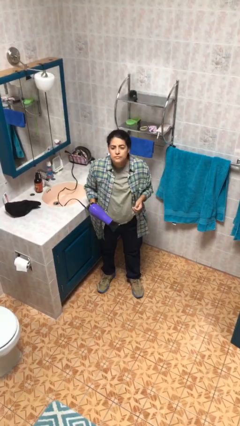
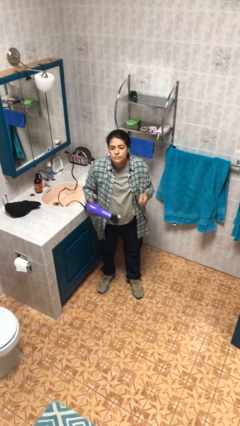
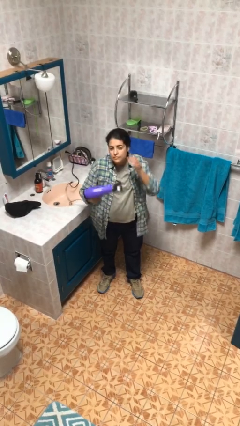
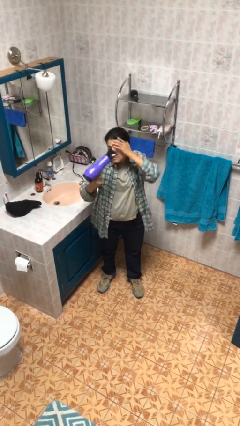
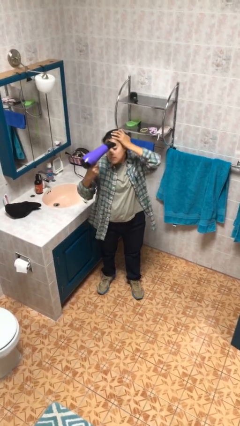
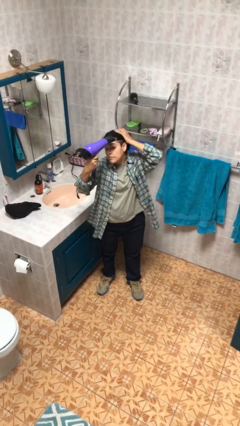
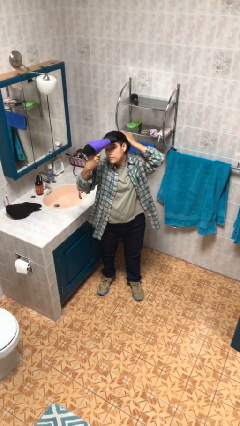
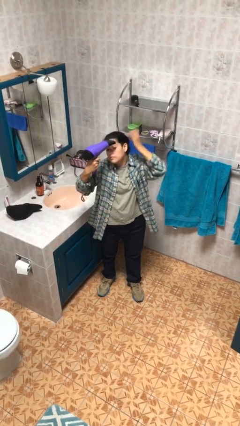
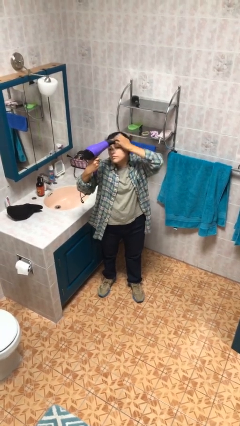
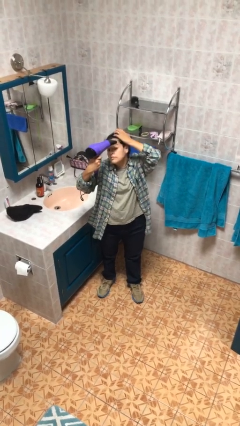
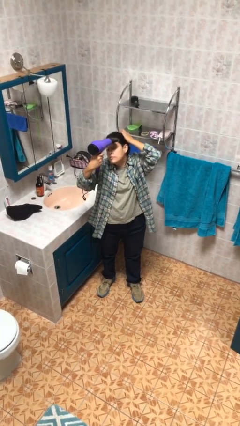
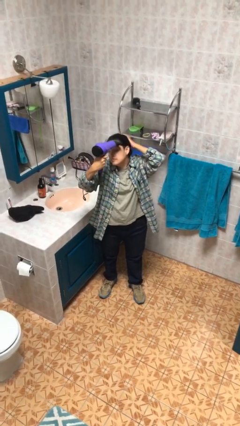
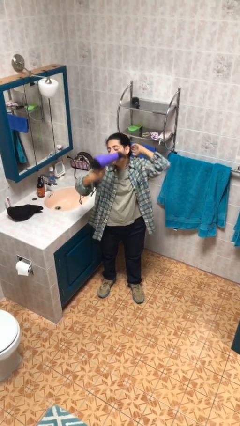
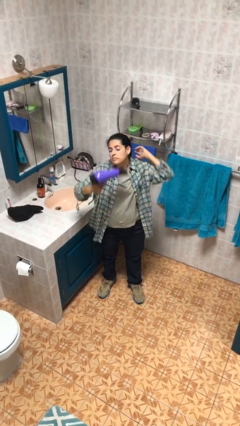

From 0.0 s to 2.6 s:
person dries hair with hairdryer

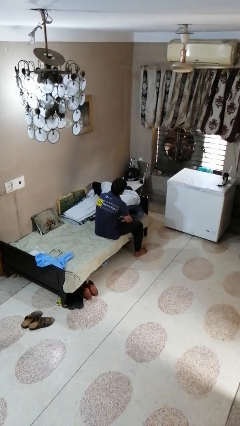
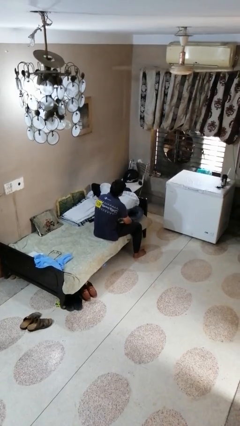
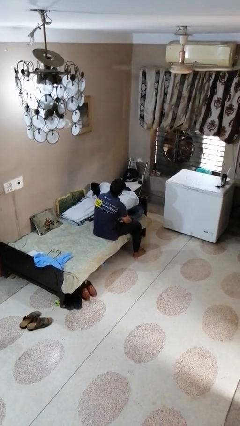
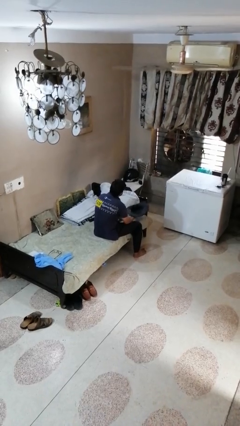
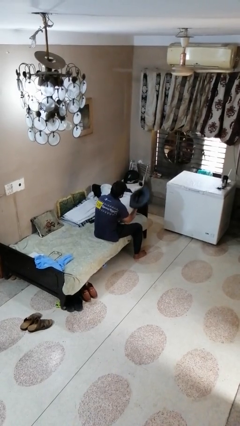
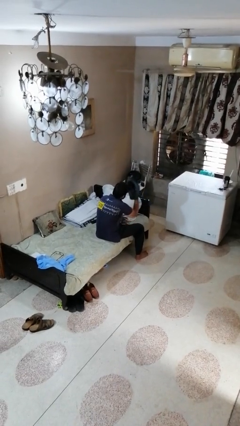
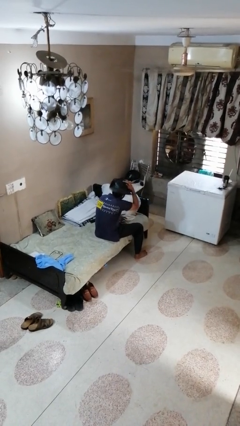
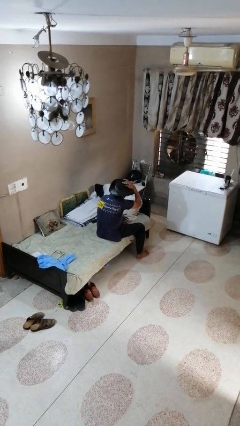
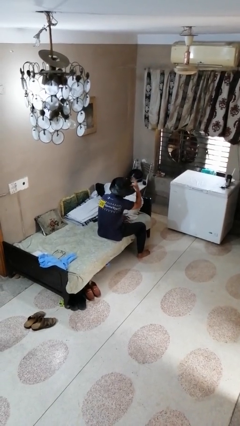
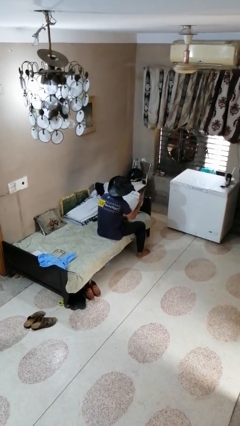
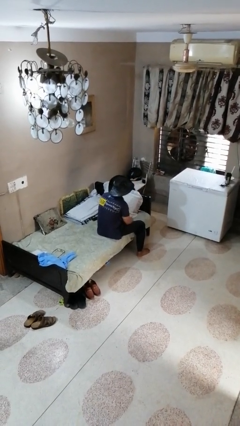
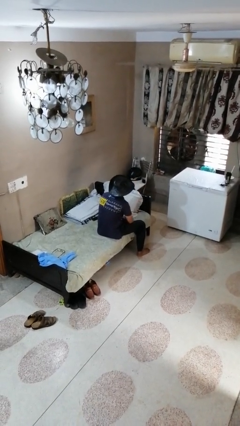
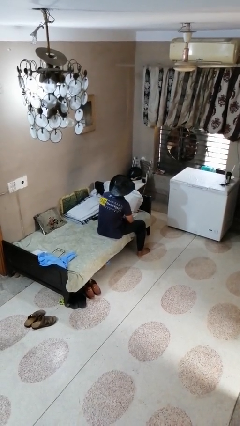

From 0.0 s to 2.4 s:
person puts on hat

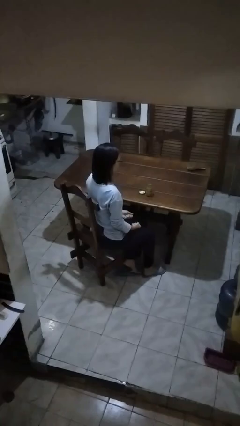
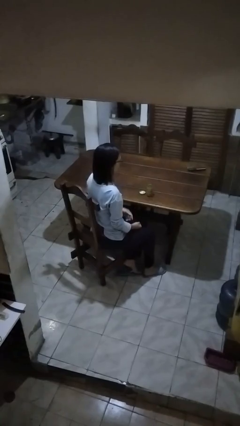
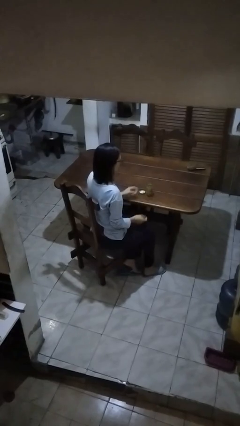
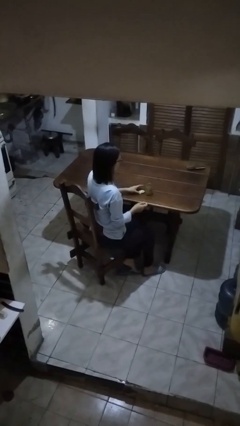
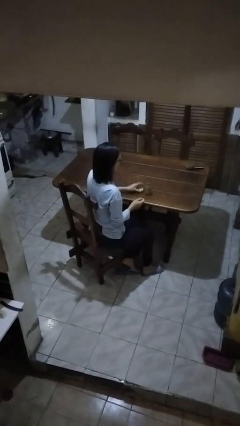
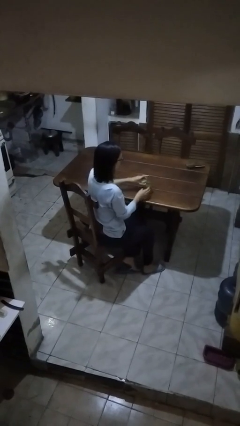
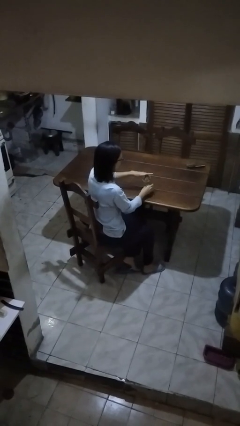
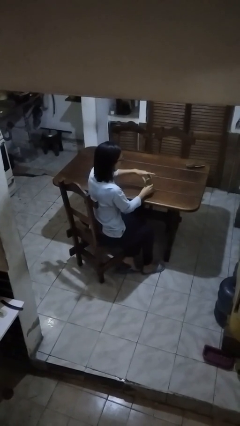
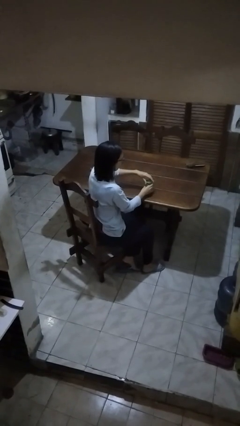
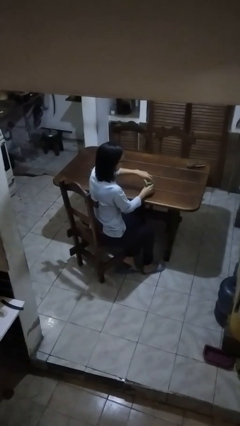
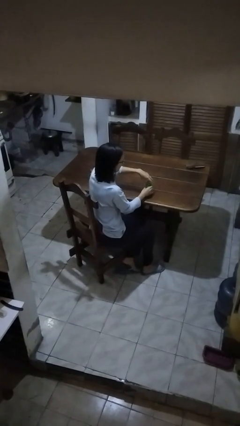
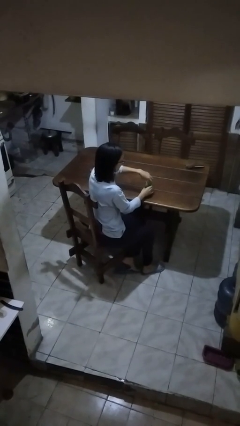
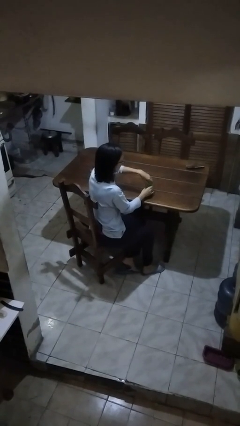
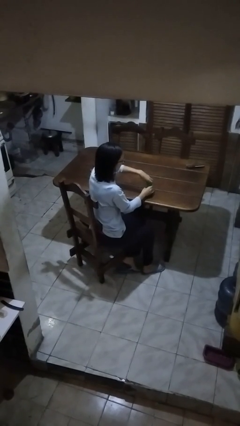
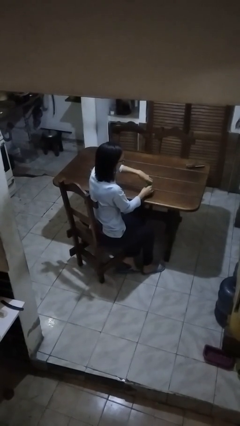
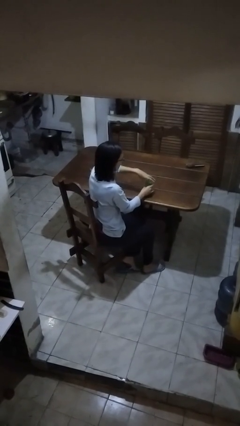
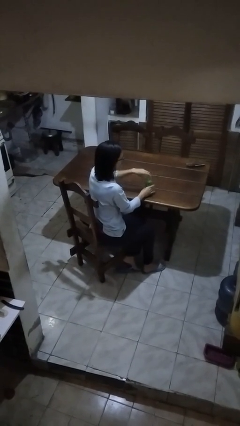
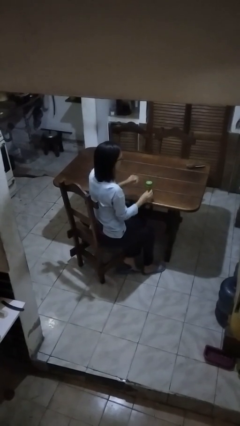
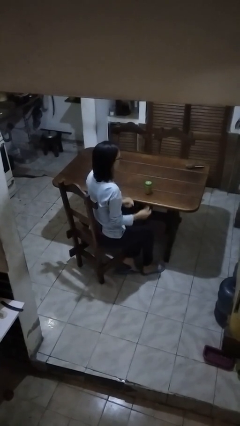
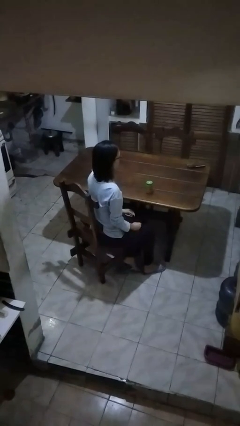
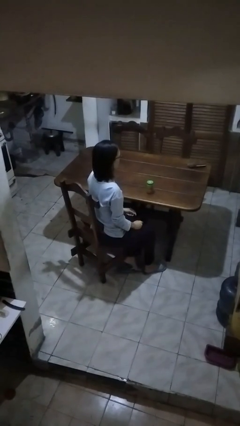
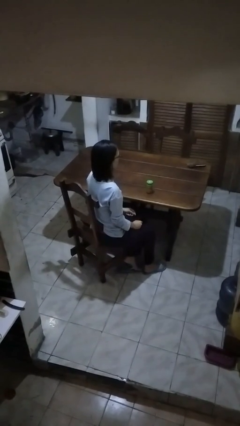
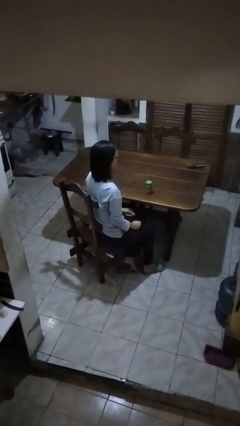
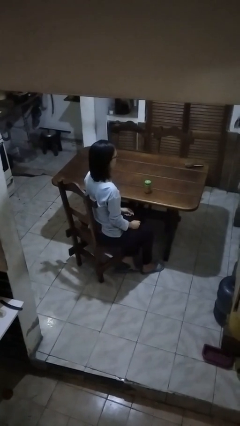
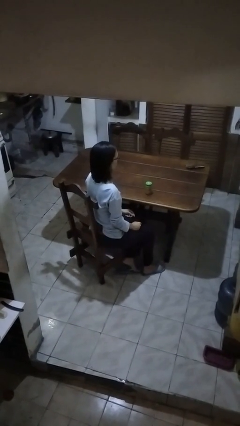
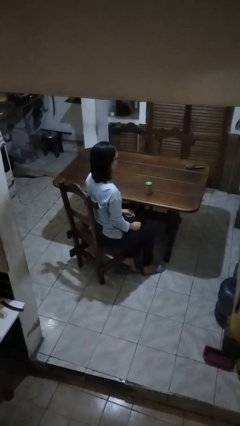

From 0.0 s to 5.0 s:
person closes jar

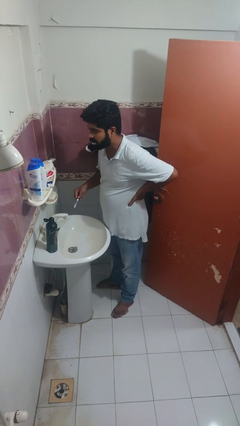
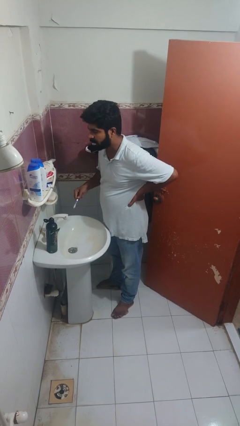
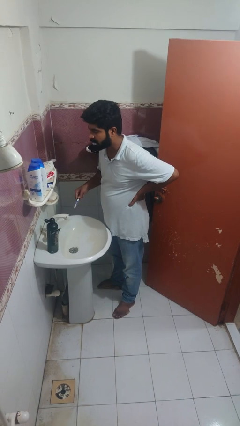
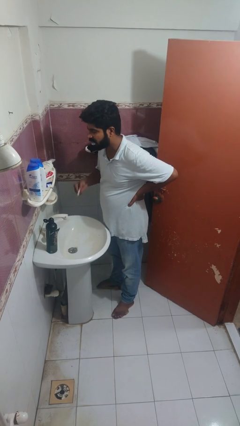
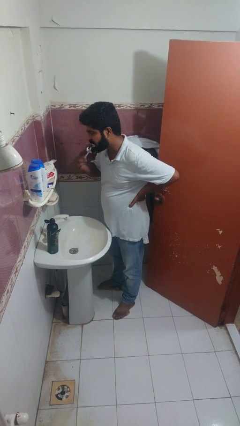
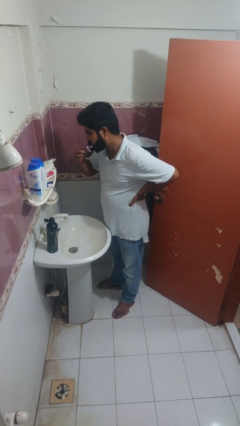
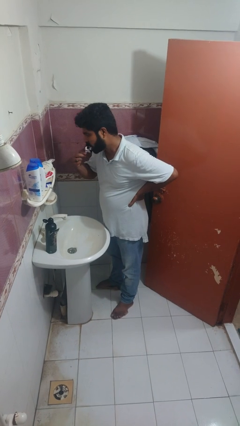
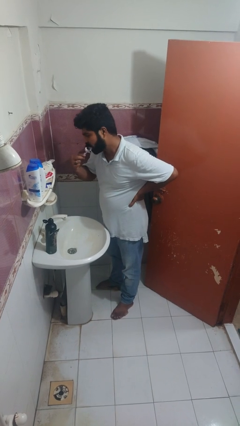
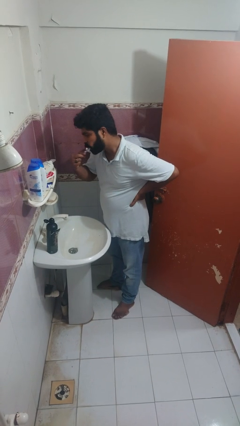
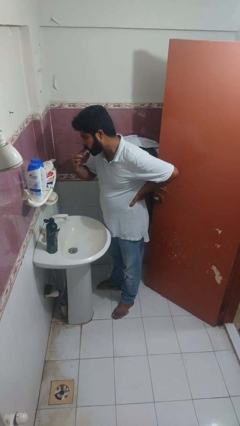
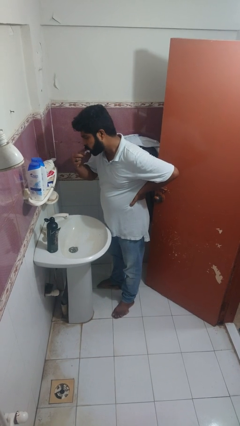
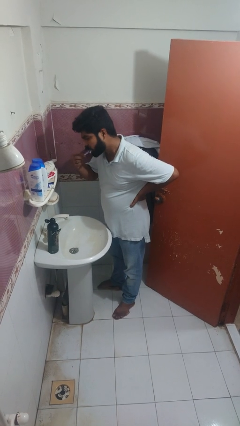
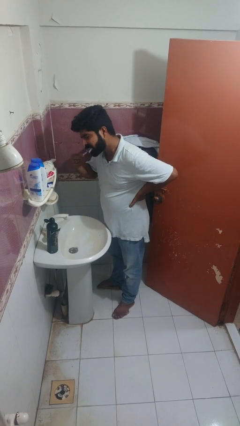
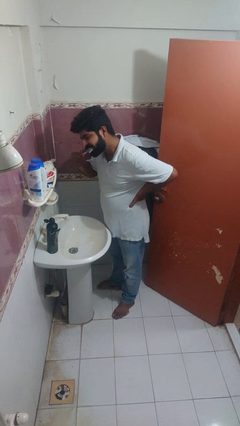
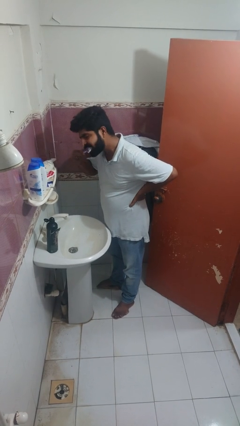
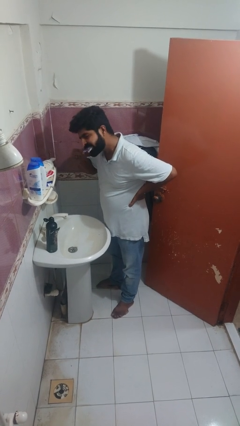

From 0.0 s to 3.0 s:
person brushes teeth

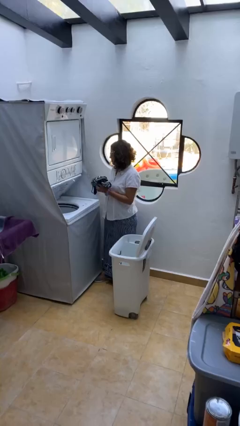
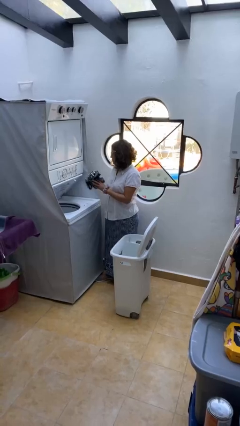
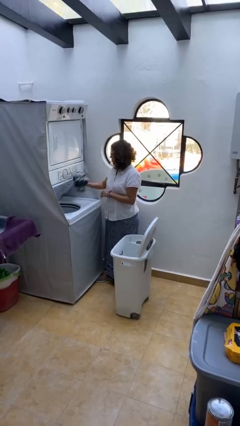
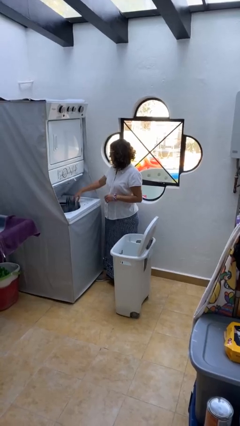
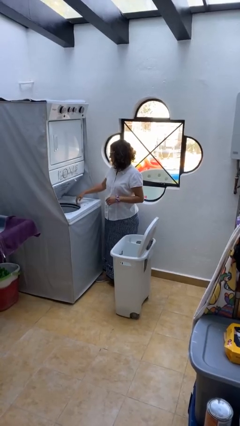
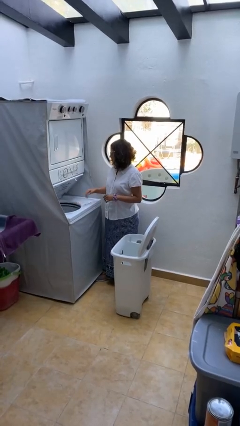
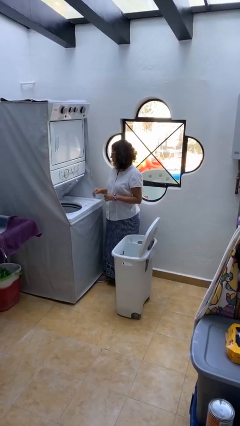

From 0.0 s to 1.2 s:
person loads clotheswasher

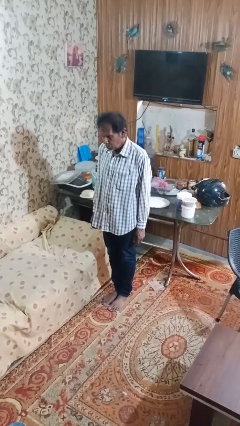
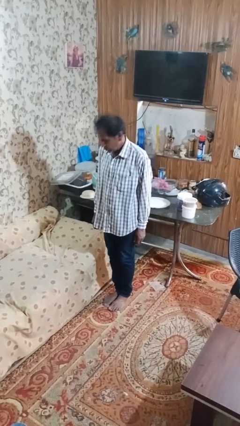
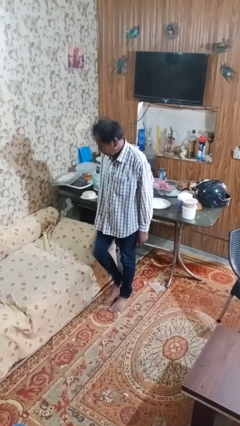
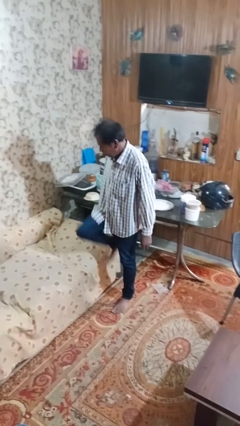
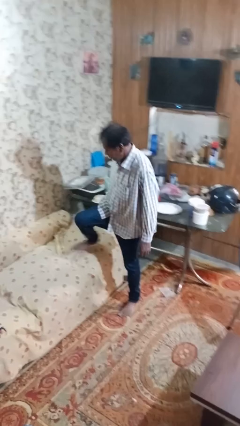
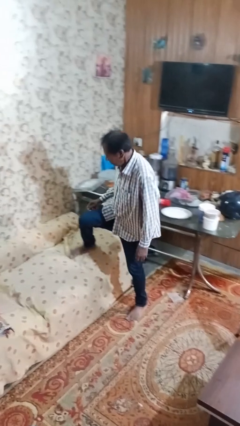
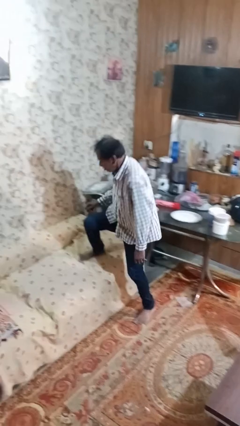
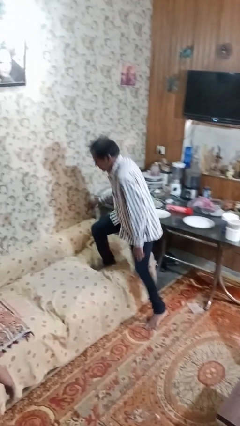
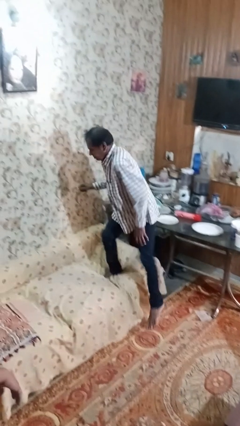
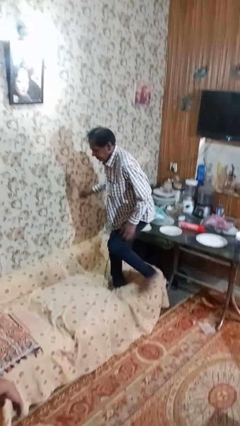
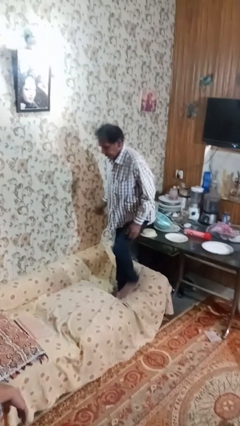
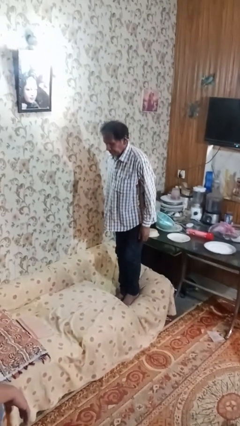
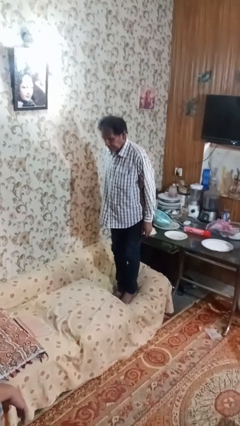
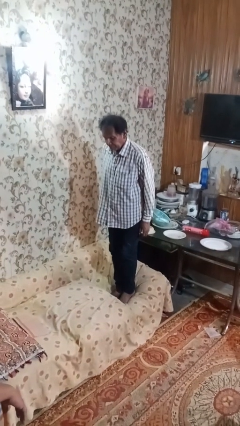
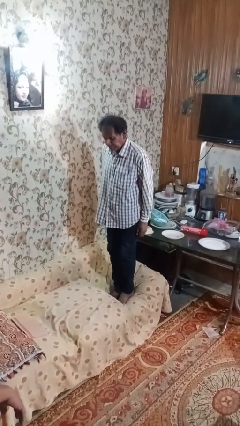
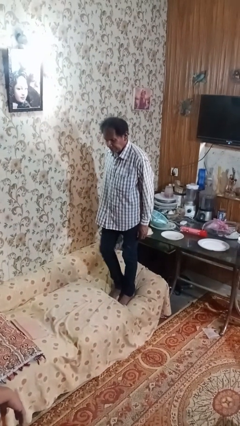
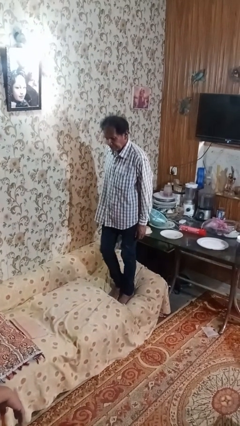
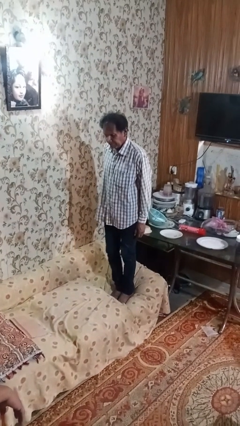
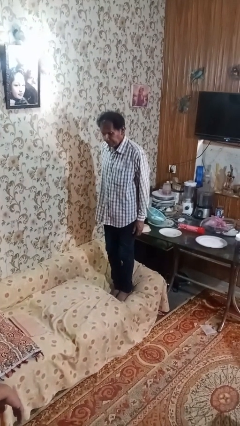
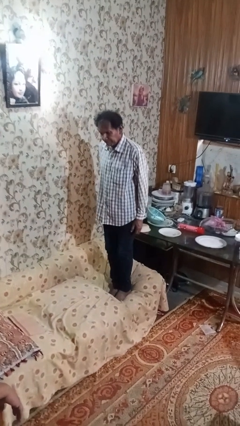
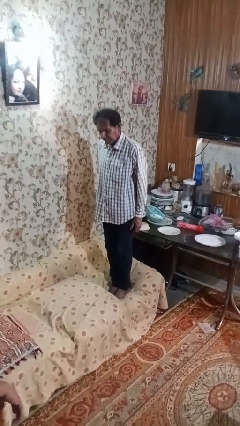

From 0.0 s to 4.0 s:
person climbs on couch
